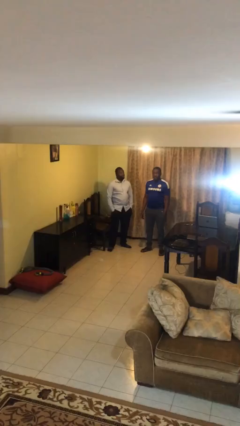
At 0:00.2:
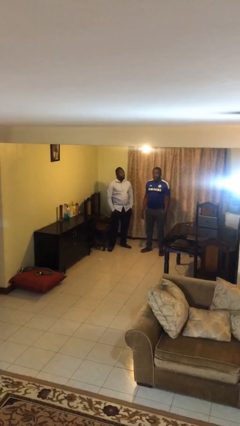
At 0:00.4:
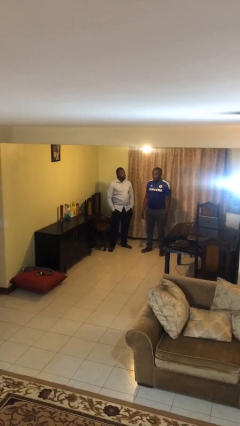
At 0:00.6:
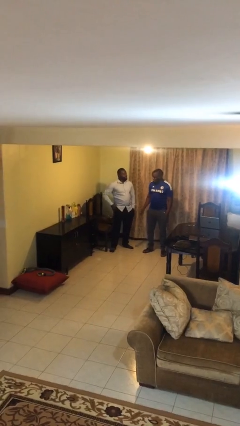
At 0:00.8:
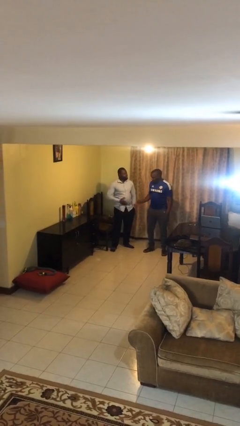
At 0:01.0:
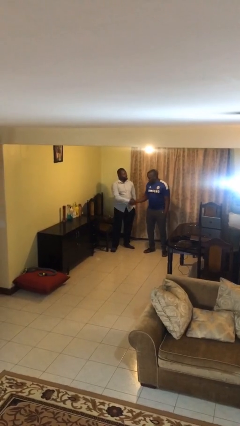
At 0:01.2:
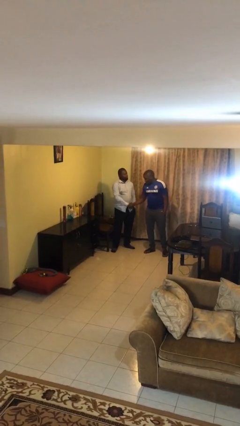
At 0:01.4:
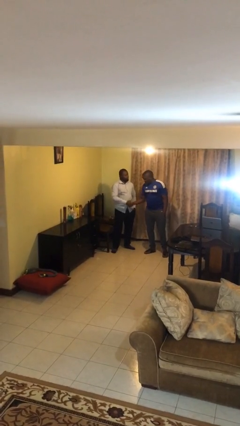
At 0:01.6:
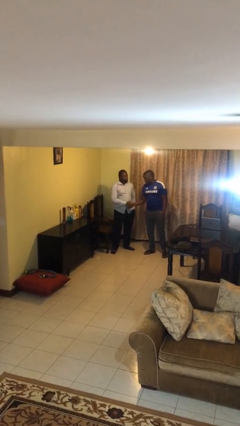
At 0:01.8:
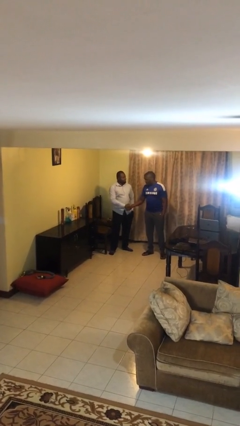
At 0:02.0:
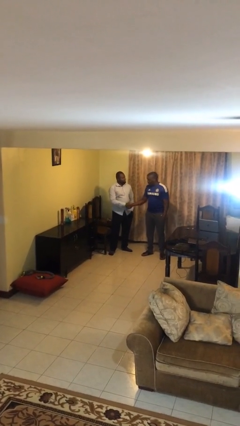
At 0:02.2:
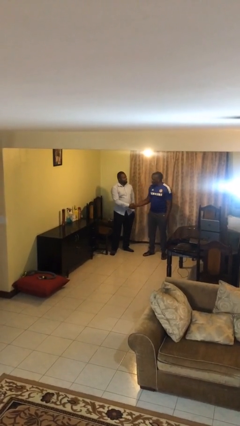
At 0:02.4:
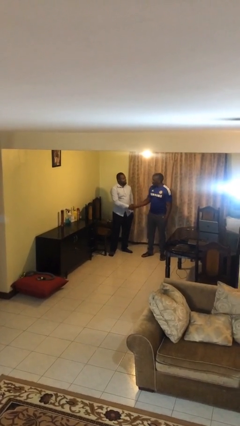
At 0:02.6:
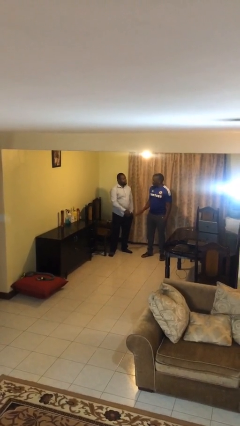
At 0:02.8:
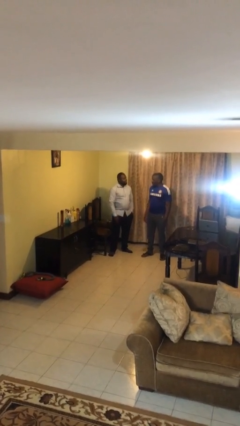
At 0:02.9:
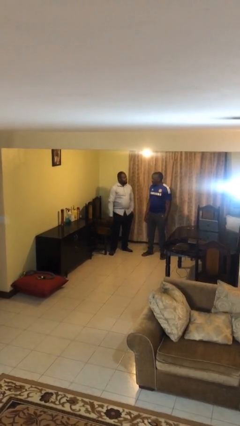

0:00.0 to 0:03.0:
person shakes hand

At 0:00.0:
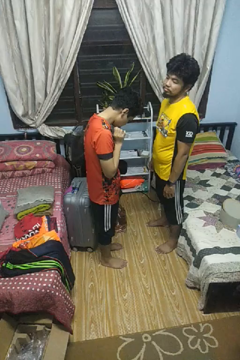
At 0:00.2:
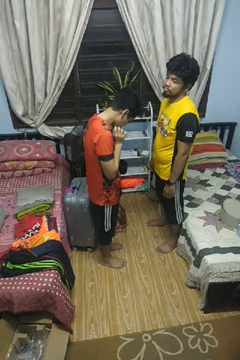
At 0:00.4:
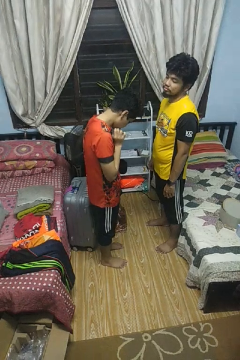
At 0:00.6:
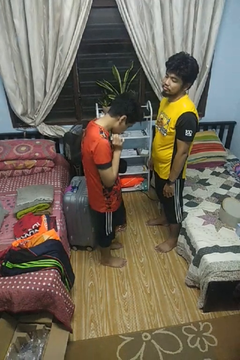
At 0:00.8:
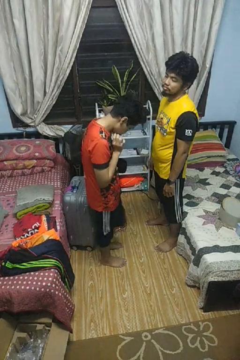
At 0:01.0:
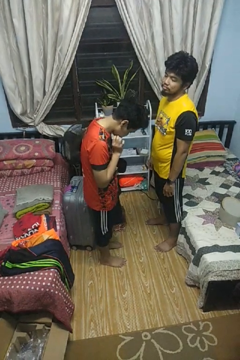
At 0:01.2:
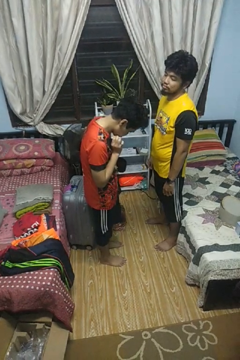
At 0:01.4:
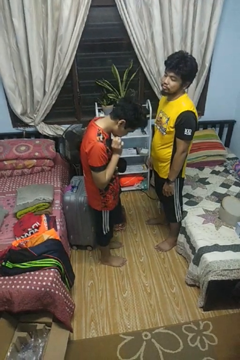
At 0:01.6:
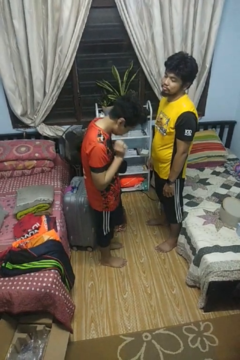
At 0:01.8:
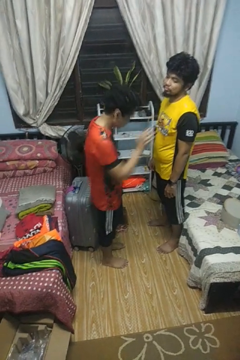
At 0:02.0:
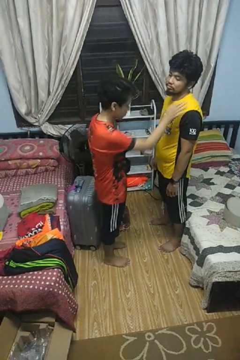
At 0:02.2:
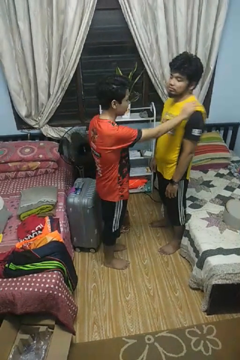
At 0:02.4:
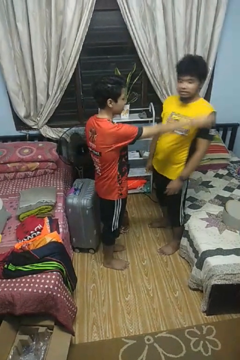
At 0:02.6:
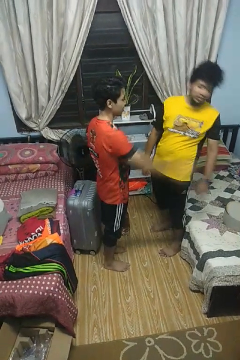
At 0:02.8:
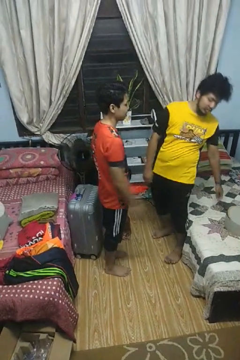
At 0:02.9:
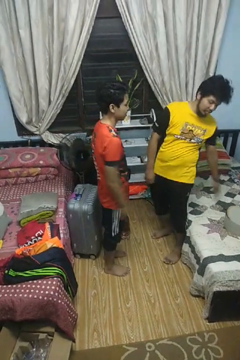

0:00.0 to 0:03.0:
person shoves person

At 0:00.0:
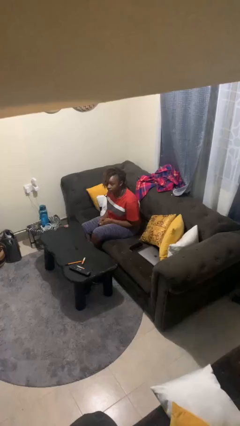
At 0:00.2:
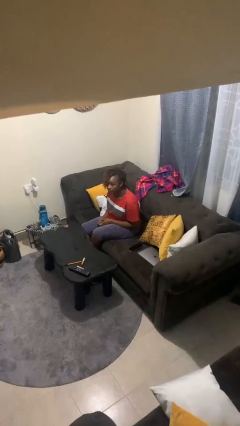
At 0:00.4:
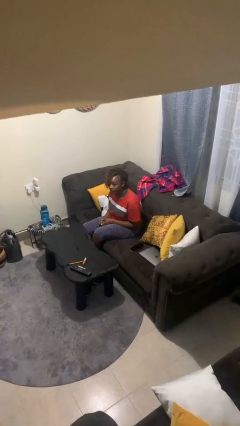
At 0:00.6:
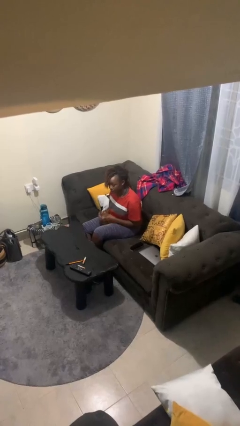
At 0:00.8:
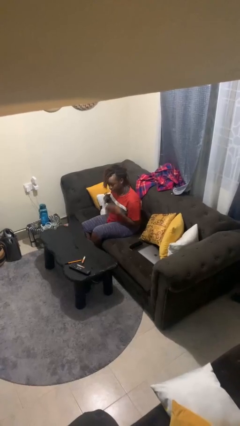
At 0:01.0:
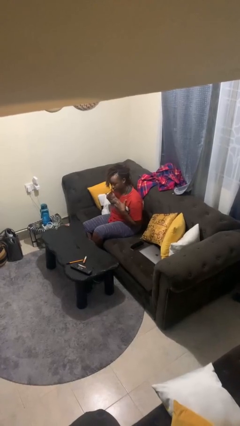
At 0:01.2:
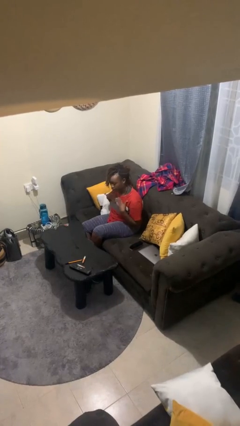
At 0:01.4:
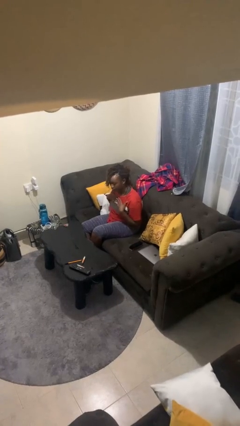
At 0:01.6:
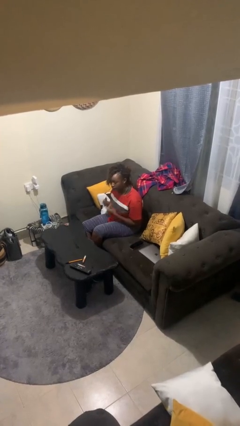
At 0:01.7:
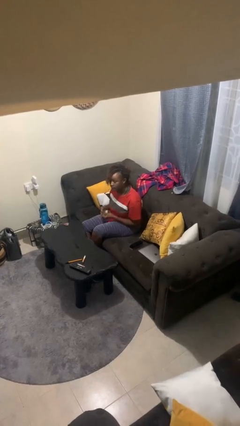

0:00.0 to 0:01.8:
person drums on chest

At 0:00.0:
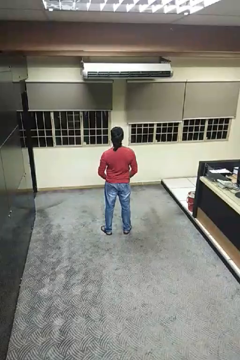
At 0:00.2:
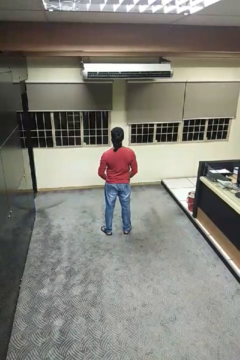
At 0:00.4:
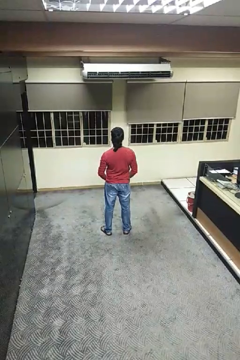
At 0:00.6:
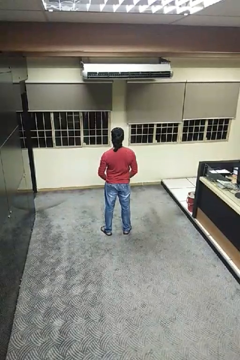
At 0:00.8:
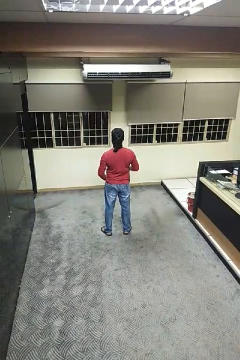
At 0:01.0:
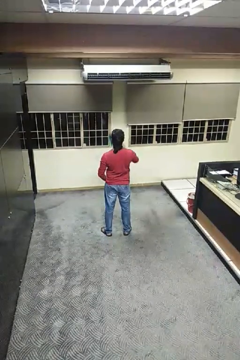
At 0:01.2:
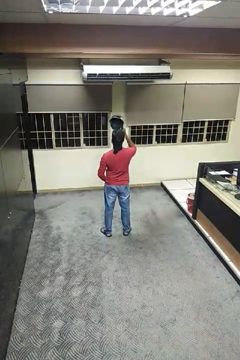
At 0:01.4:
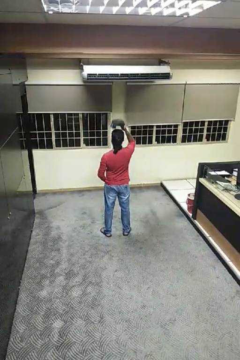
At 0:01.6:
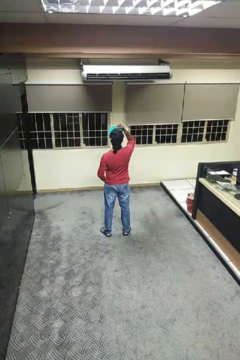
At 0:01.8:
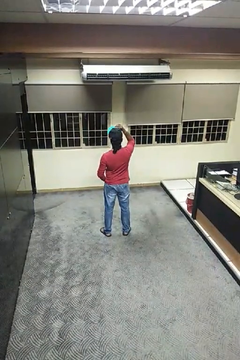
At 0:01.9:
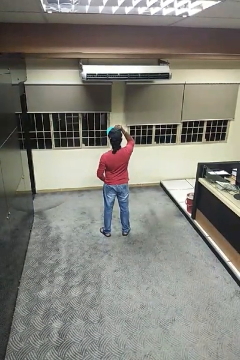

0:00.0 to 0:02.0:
person puts on hat

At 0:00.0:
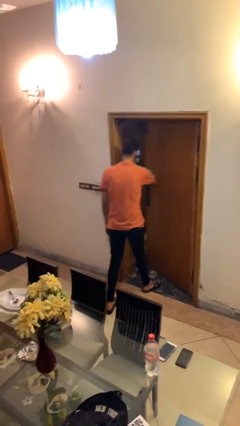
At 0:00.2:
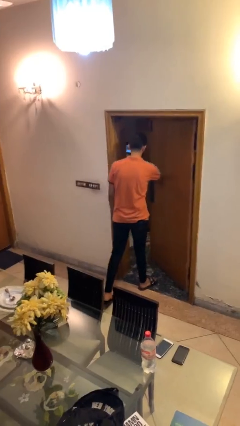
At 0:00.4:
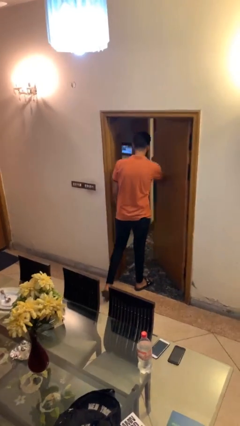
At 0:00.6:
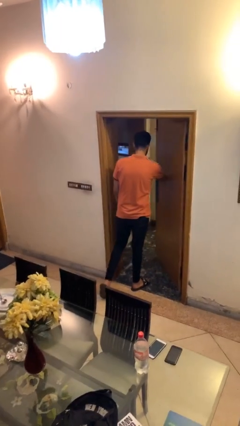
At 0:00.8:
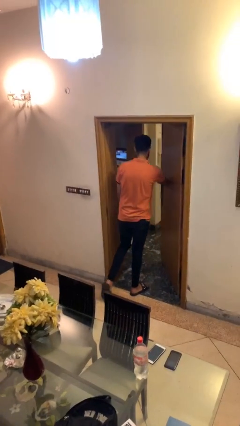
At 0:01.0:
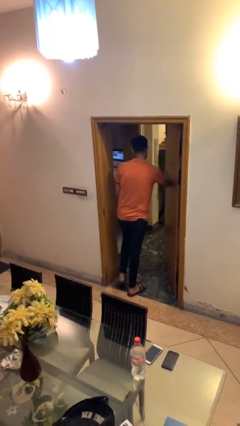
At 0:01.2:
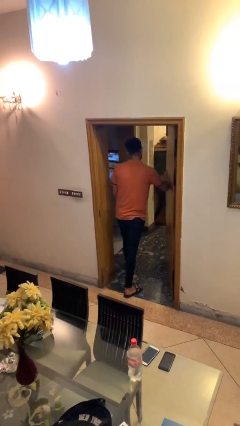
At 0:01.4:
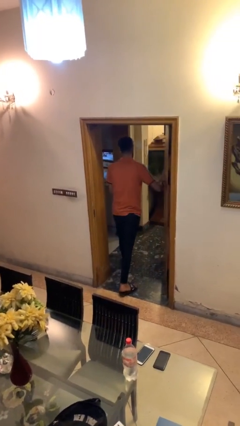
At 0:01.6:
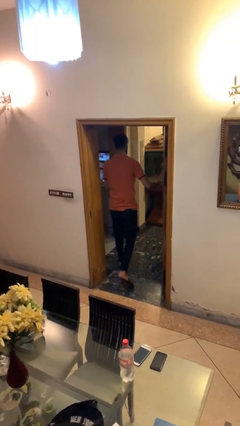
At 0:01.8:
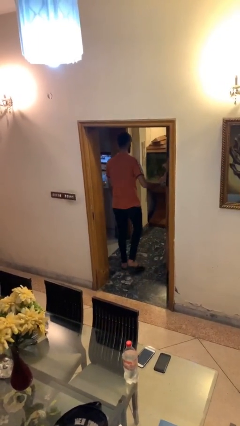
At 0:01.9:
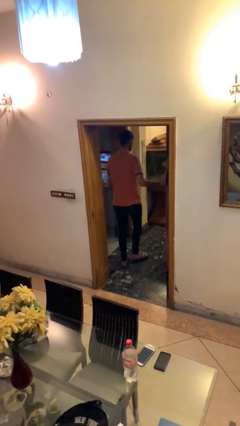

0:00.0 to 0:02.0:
person exits scene through structure

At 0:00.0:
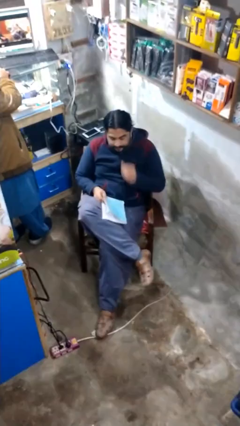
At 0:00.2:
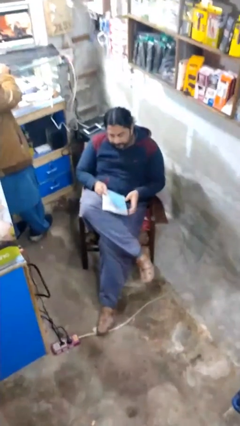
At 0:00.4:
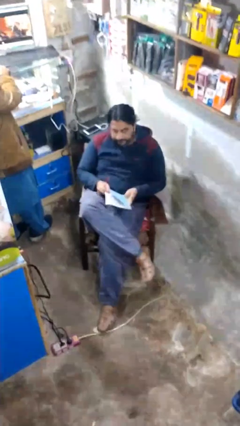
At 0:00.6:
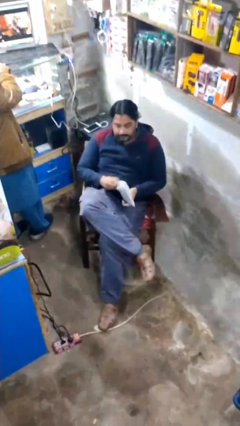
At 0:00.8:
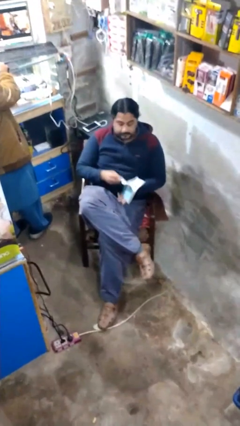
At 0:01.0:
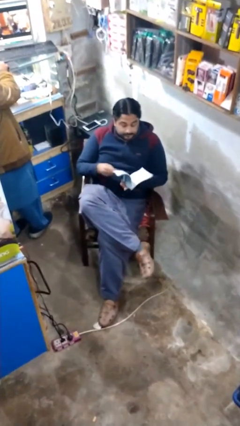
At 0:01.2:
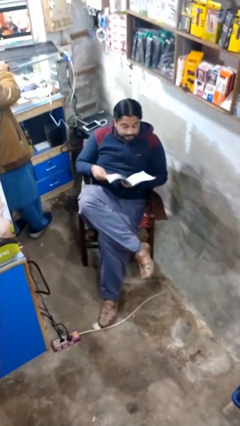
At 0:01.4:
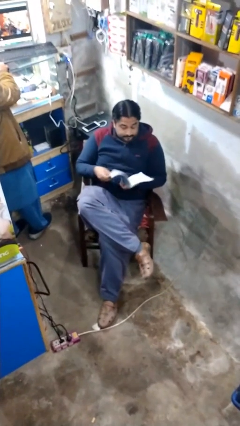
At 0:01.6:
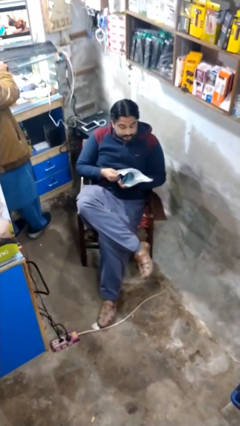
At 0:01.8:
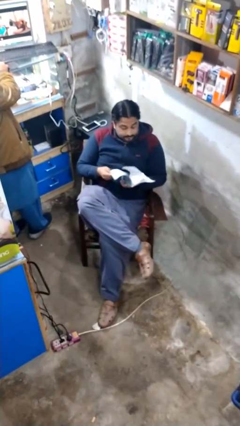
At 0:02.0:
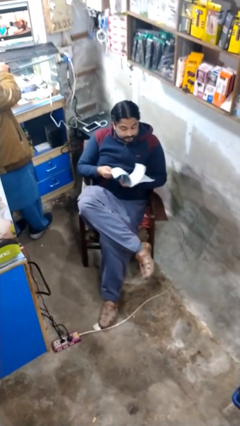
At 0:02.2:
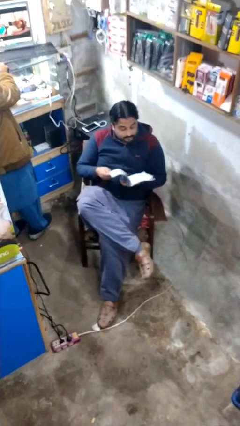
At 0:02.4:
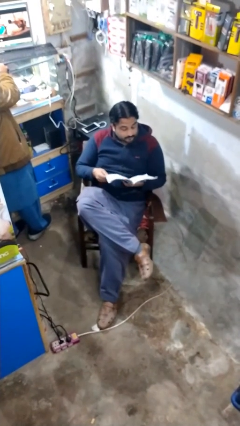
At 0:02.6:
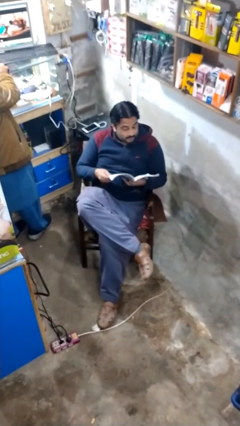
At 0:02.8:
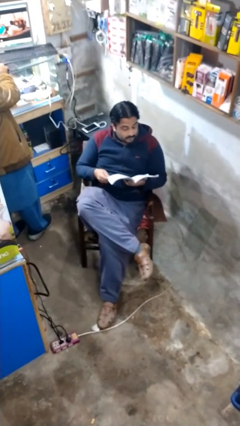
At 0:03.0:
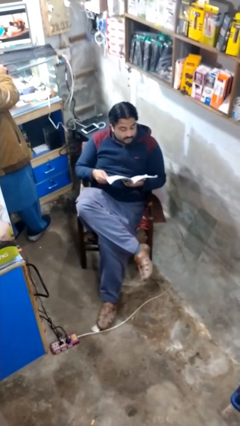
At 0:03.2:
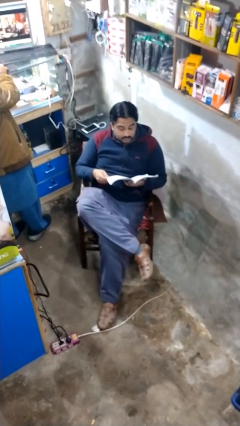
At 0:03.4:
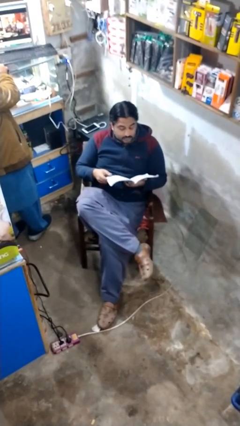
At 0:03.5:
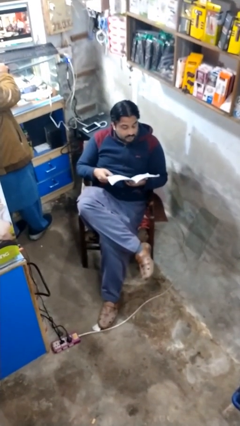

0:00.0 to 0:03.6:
person reads document

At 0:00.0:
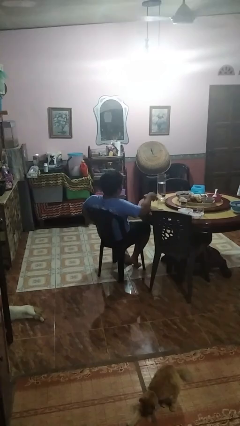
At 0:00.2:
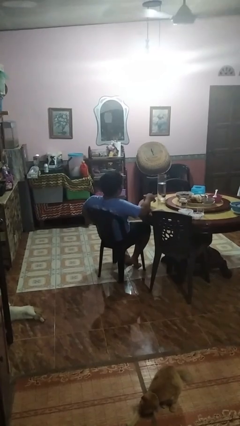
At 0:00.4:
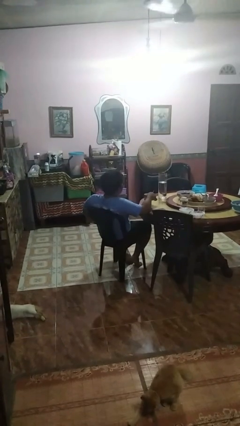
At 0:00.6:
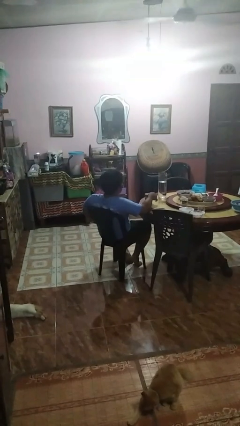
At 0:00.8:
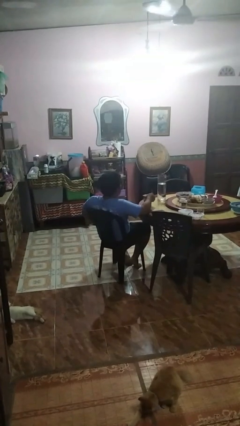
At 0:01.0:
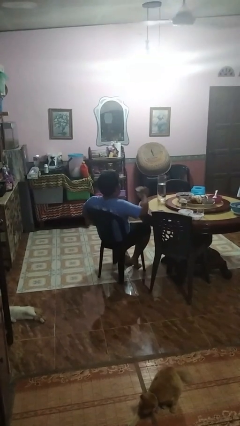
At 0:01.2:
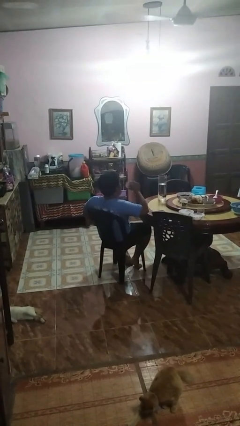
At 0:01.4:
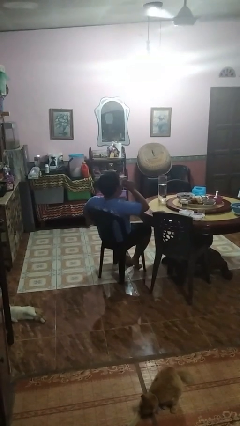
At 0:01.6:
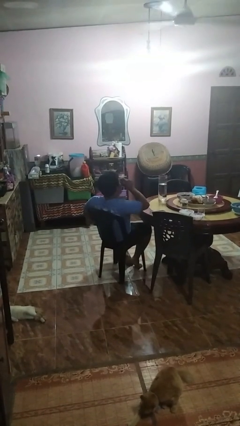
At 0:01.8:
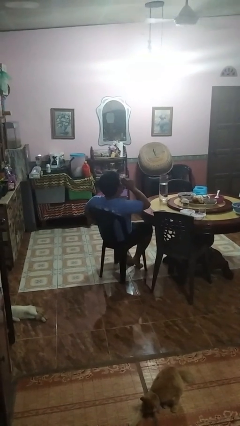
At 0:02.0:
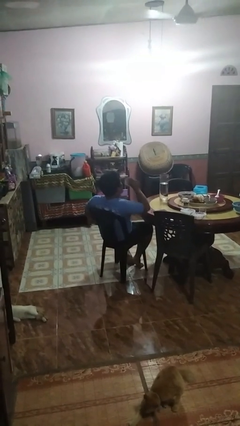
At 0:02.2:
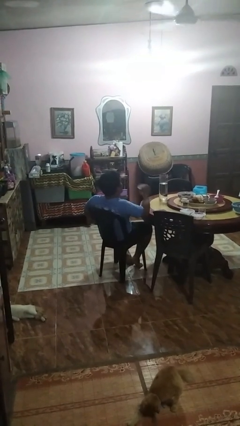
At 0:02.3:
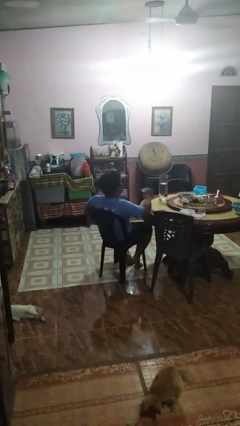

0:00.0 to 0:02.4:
person drinks from mug

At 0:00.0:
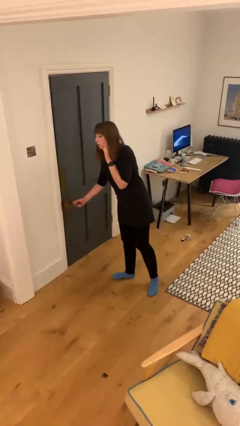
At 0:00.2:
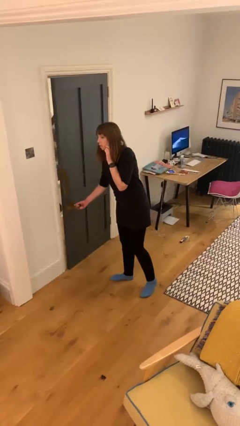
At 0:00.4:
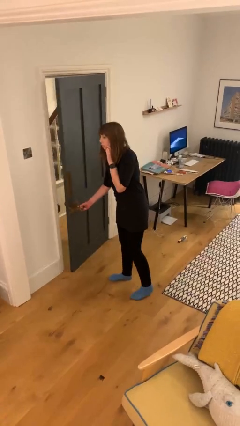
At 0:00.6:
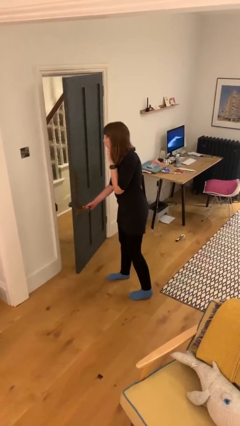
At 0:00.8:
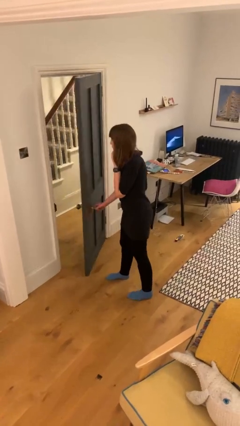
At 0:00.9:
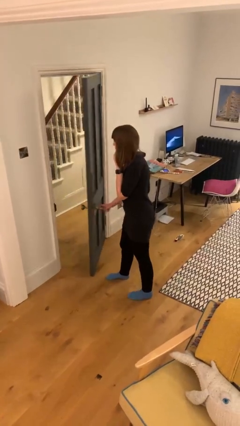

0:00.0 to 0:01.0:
person opens facility door
